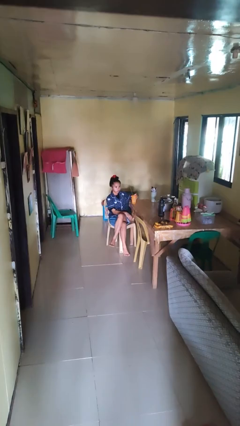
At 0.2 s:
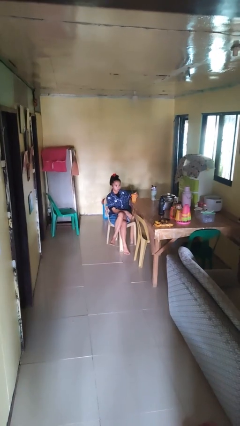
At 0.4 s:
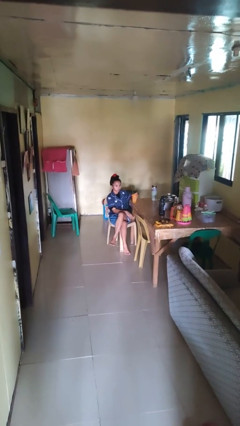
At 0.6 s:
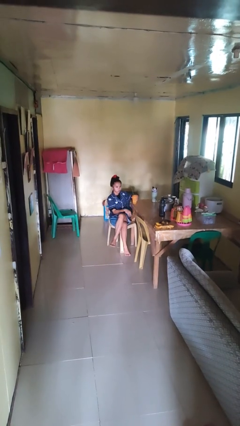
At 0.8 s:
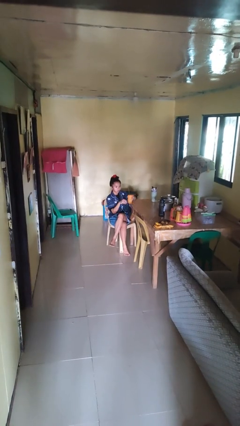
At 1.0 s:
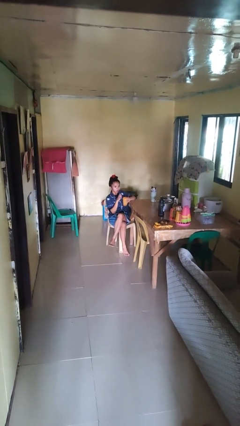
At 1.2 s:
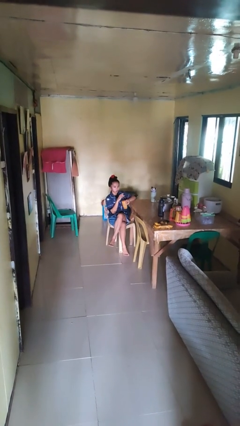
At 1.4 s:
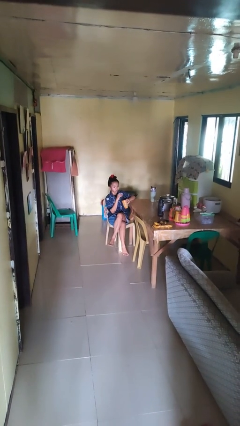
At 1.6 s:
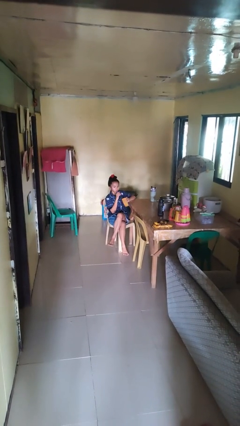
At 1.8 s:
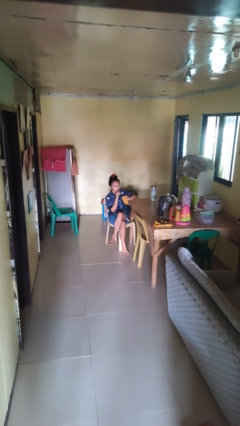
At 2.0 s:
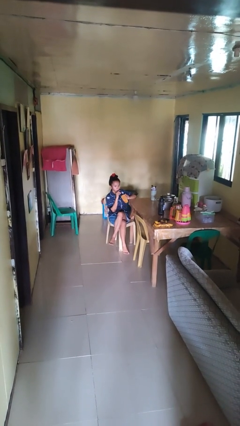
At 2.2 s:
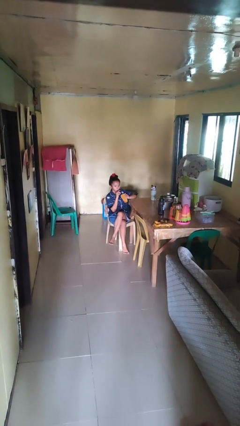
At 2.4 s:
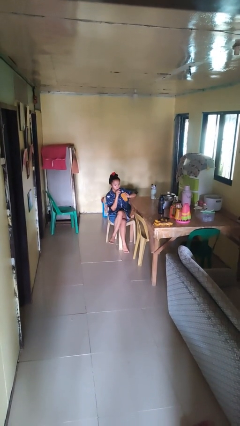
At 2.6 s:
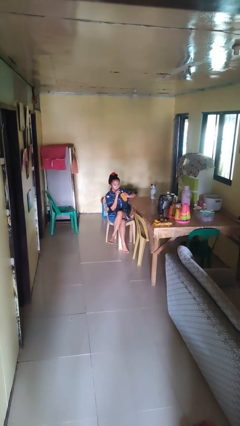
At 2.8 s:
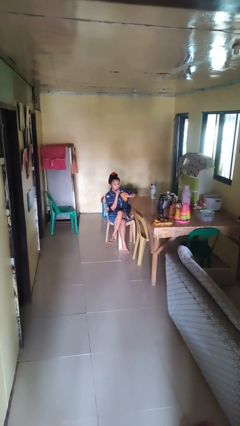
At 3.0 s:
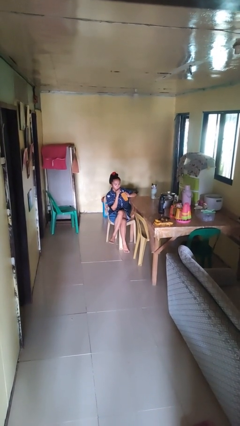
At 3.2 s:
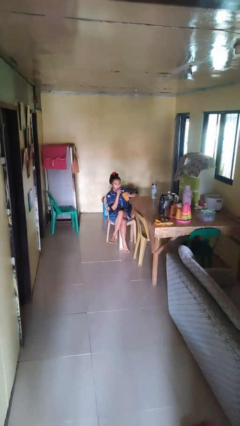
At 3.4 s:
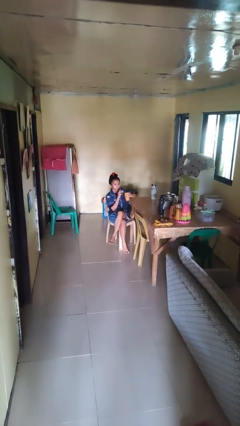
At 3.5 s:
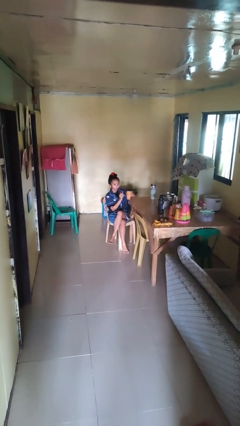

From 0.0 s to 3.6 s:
person drinks from straw

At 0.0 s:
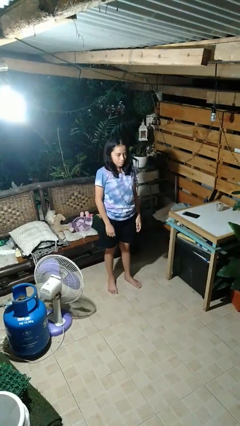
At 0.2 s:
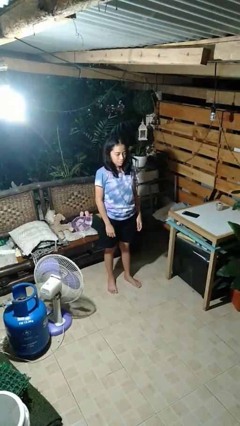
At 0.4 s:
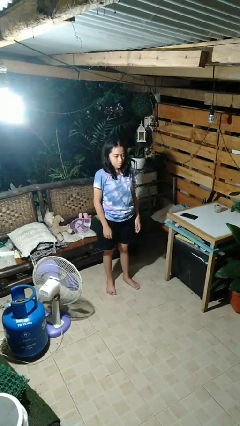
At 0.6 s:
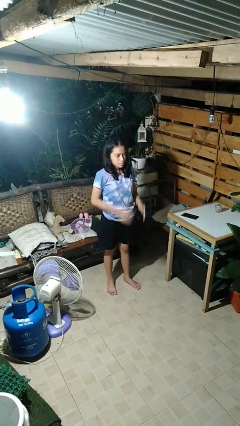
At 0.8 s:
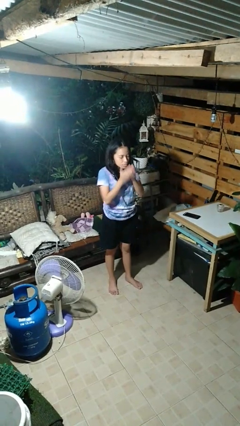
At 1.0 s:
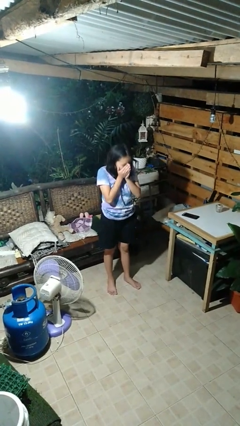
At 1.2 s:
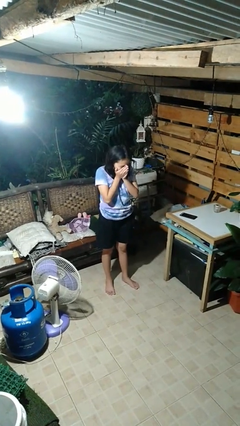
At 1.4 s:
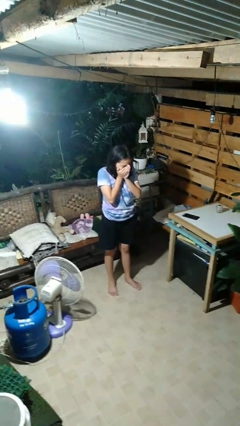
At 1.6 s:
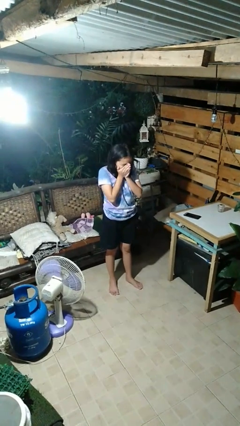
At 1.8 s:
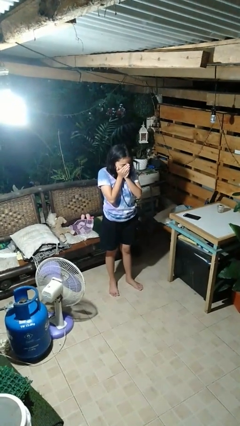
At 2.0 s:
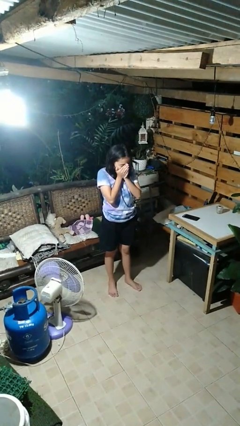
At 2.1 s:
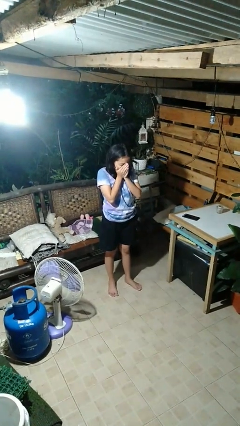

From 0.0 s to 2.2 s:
person sneezes into hand

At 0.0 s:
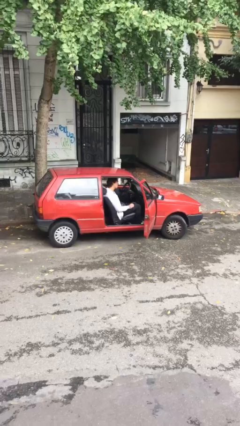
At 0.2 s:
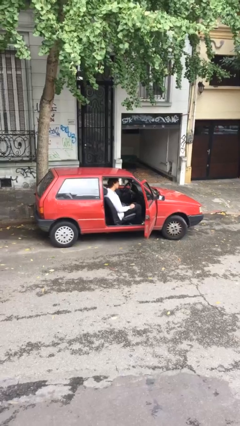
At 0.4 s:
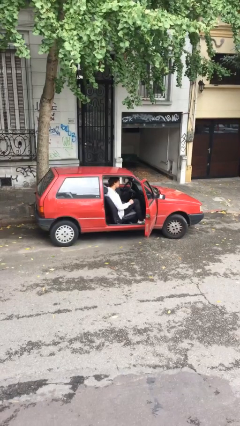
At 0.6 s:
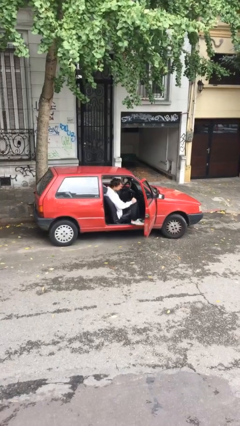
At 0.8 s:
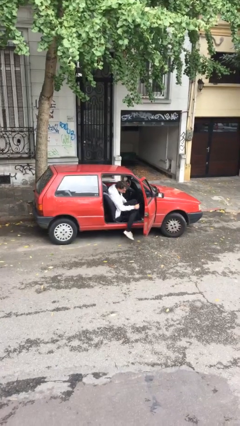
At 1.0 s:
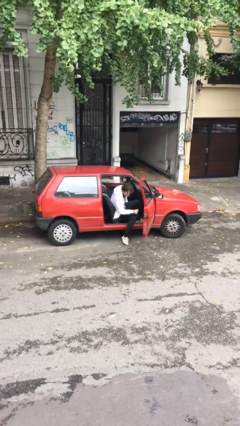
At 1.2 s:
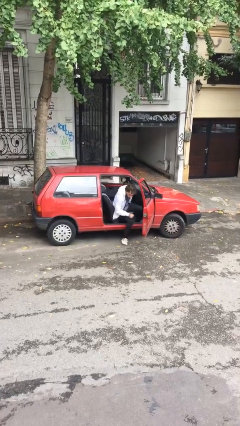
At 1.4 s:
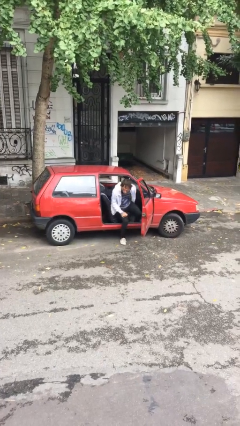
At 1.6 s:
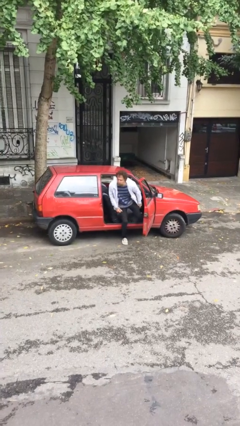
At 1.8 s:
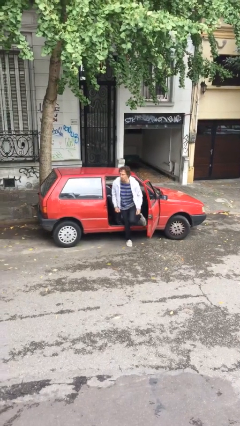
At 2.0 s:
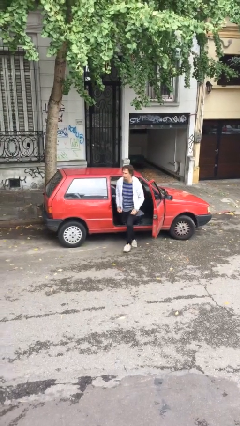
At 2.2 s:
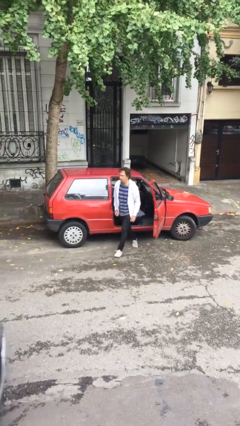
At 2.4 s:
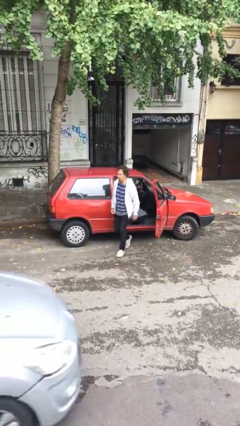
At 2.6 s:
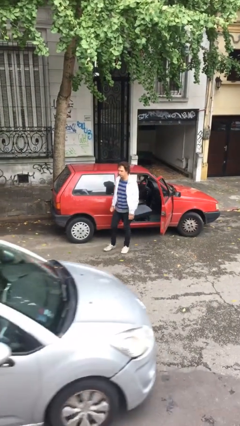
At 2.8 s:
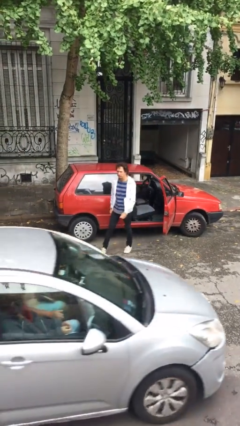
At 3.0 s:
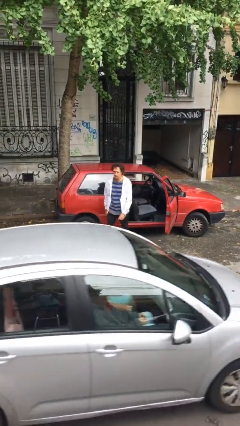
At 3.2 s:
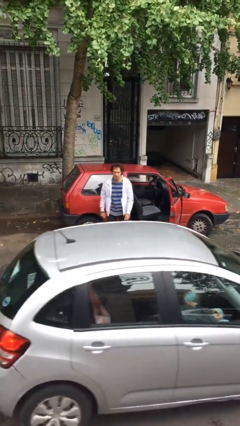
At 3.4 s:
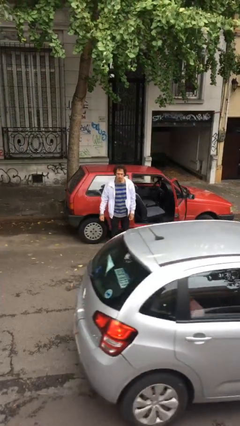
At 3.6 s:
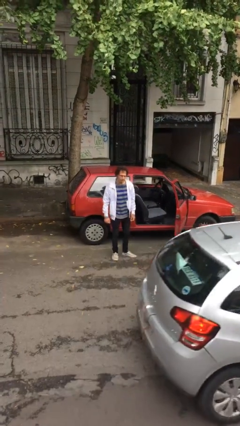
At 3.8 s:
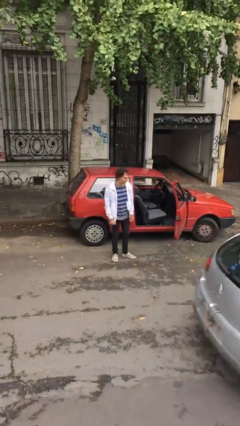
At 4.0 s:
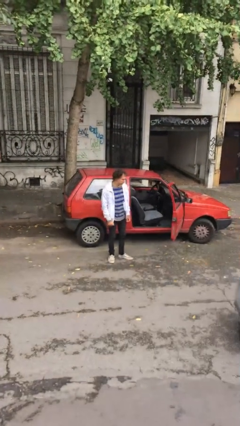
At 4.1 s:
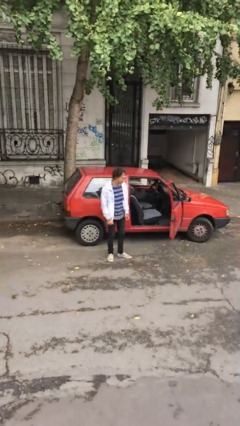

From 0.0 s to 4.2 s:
person exits car

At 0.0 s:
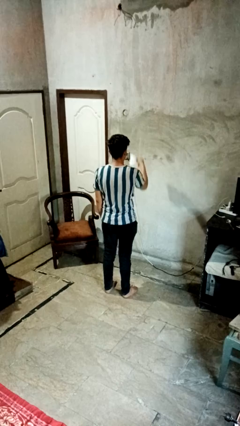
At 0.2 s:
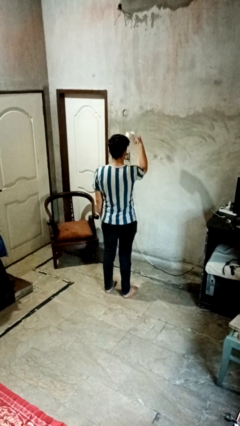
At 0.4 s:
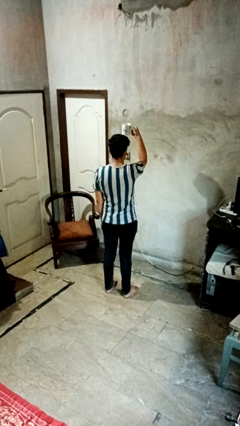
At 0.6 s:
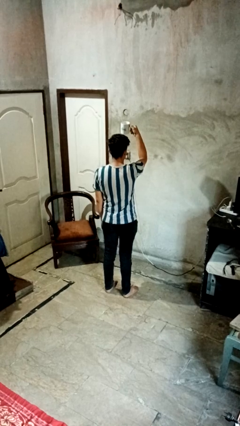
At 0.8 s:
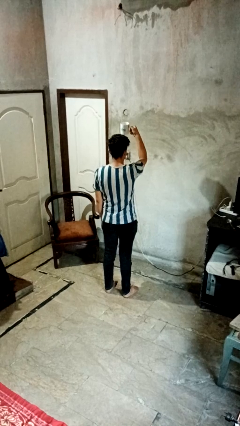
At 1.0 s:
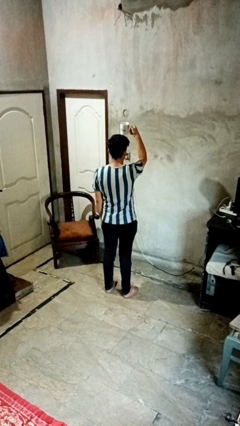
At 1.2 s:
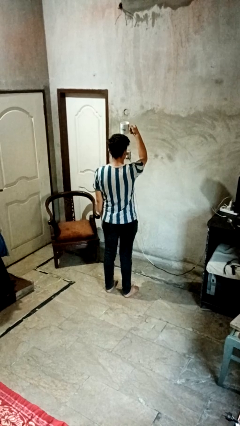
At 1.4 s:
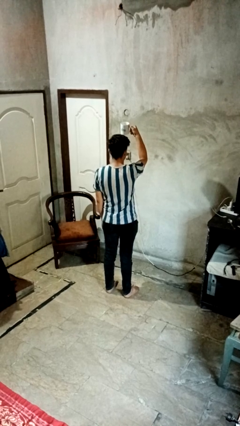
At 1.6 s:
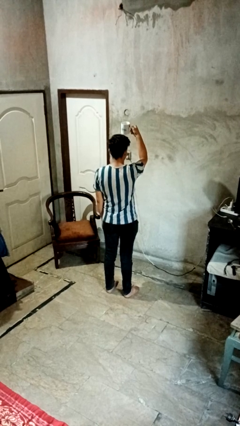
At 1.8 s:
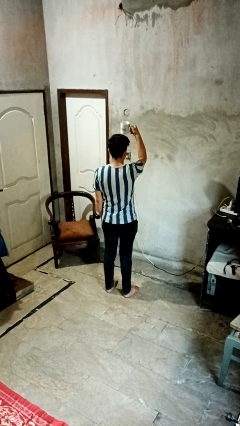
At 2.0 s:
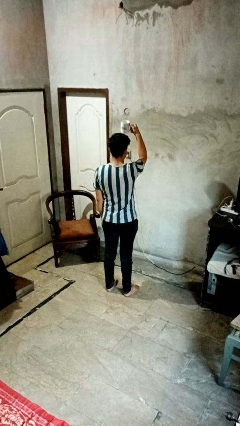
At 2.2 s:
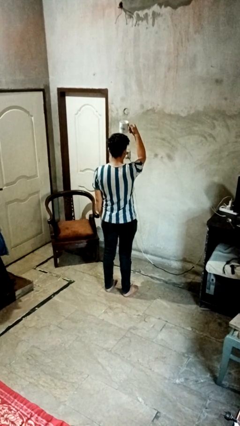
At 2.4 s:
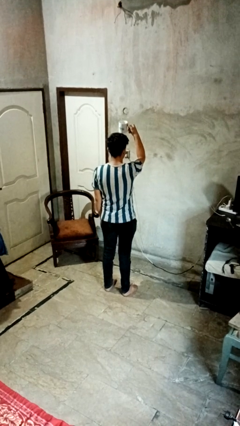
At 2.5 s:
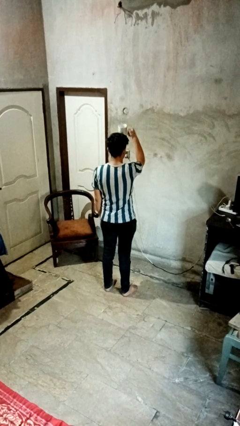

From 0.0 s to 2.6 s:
person holds object above head

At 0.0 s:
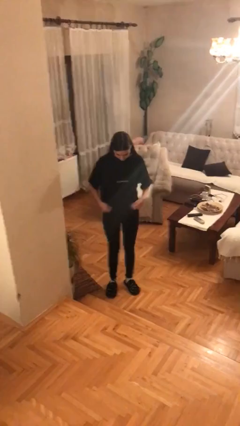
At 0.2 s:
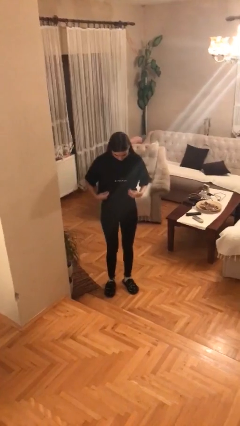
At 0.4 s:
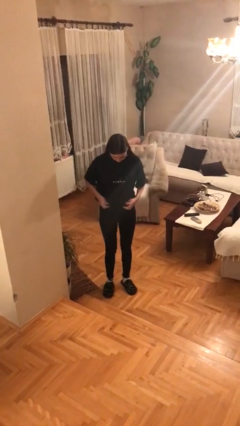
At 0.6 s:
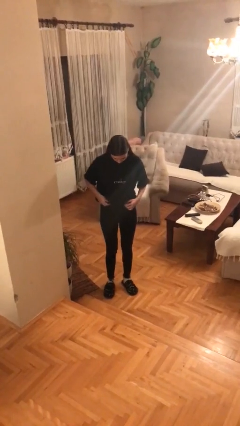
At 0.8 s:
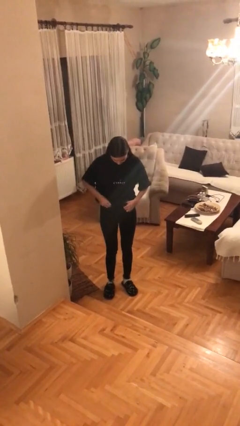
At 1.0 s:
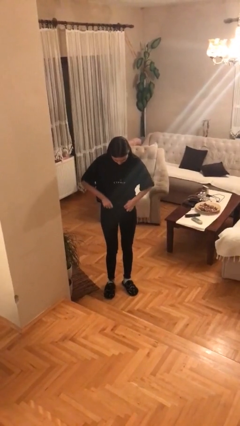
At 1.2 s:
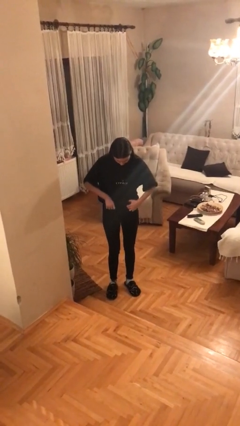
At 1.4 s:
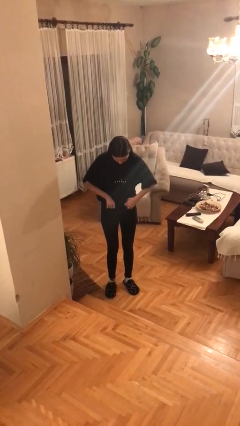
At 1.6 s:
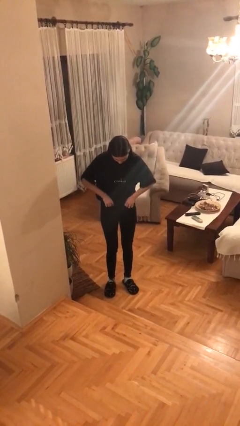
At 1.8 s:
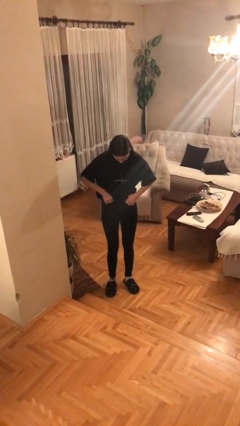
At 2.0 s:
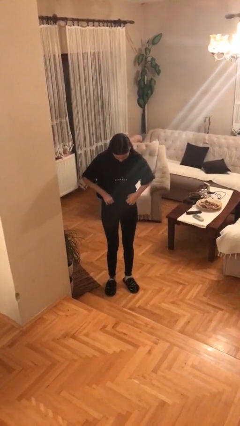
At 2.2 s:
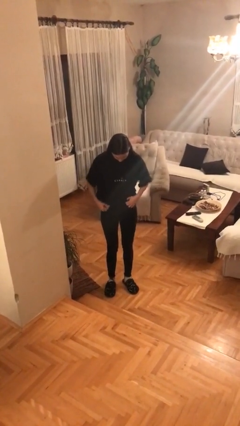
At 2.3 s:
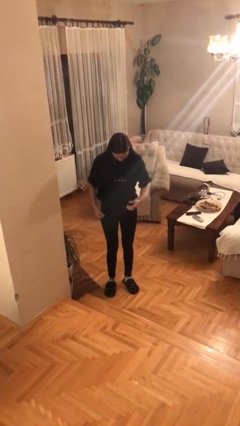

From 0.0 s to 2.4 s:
person tucks in shirt

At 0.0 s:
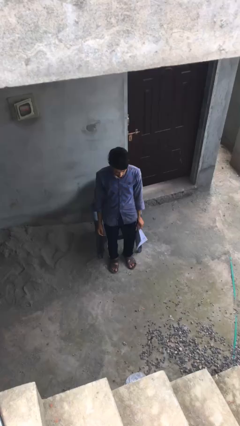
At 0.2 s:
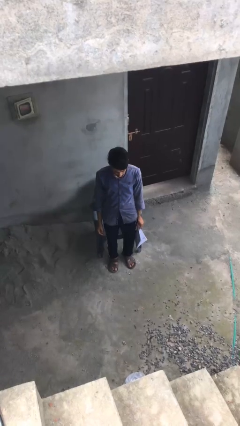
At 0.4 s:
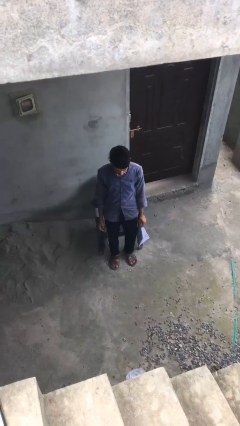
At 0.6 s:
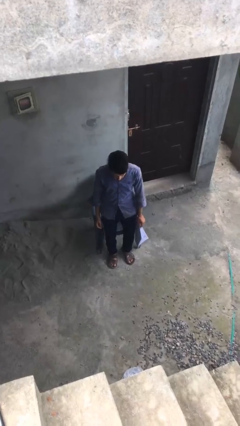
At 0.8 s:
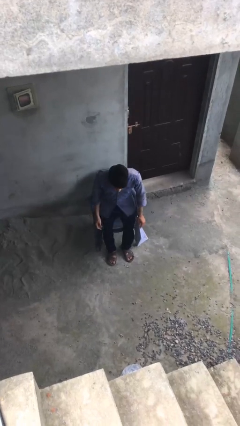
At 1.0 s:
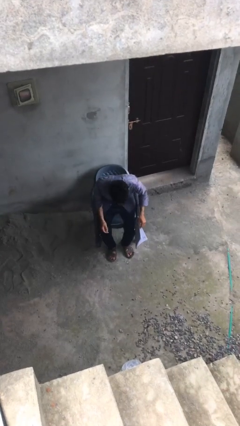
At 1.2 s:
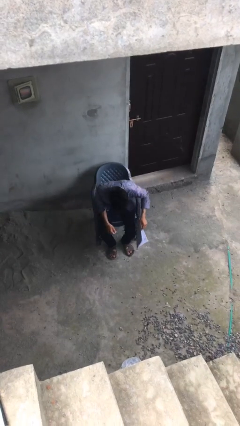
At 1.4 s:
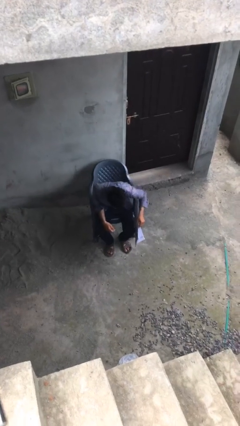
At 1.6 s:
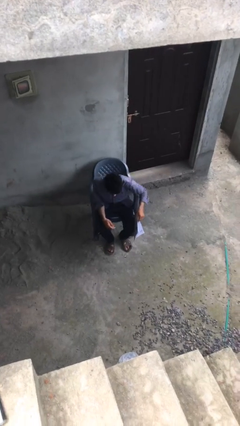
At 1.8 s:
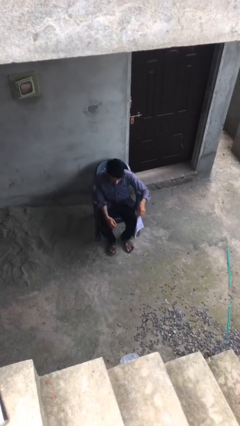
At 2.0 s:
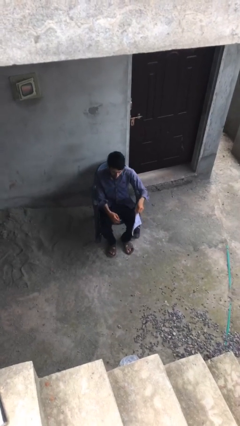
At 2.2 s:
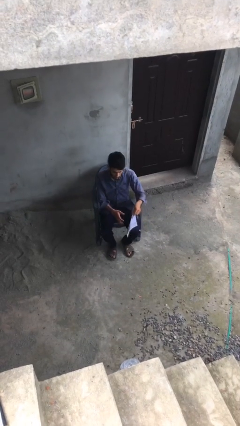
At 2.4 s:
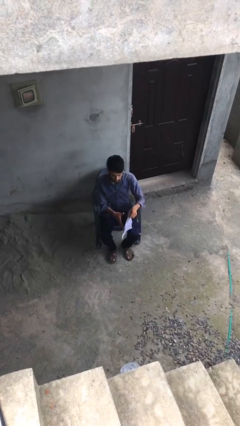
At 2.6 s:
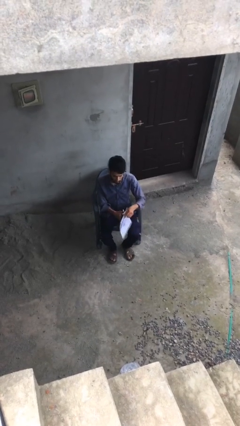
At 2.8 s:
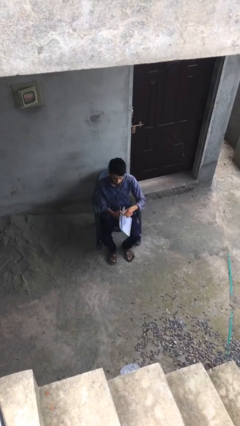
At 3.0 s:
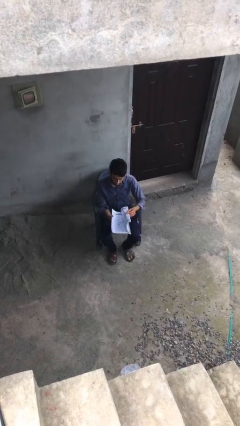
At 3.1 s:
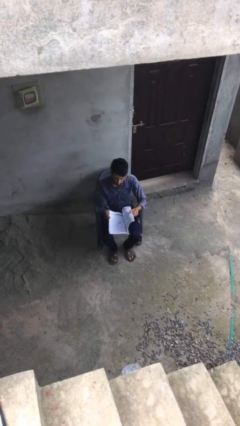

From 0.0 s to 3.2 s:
person sits down
